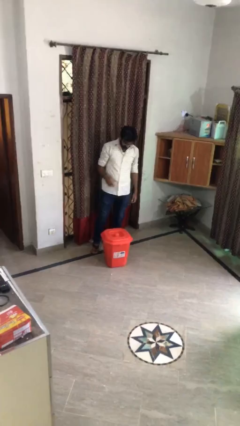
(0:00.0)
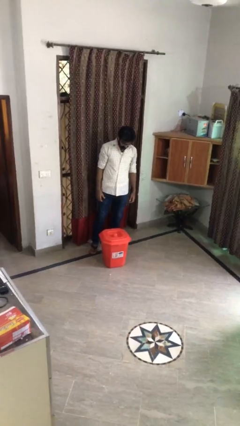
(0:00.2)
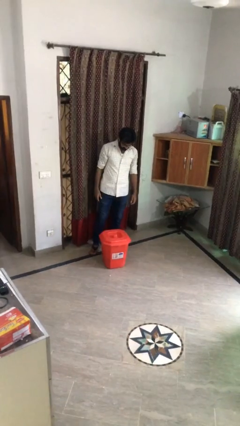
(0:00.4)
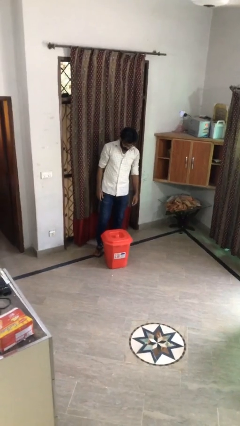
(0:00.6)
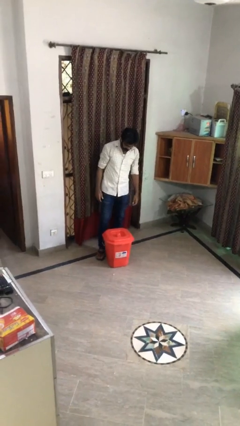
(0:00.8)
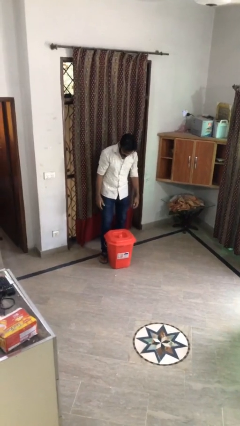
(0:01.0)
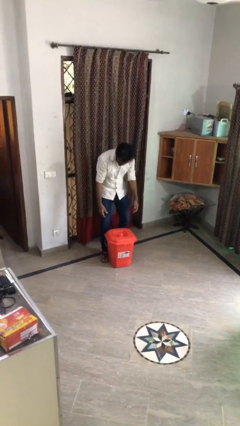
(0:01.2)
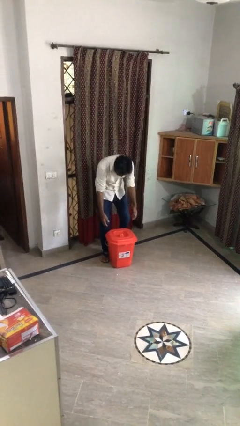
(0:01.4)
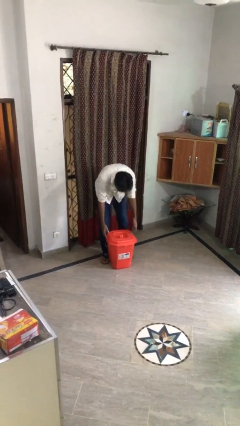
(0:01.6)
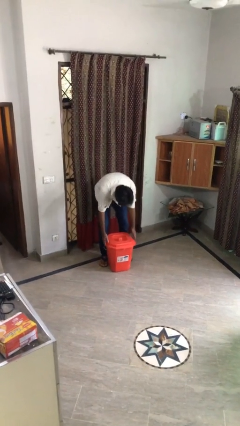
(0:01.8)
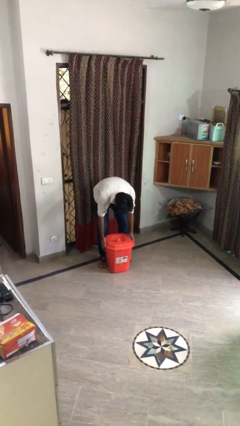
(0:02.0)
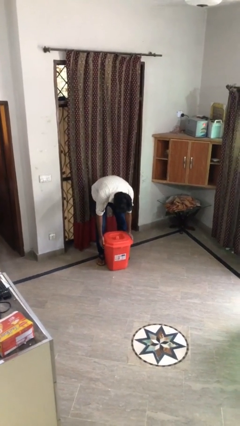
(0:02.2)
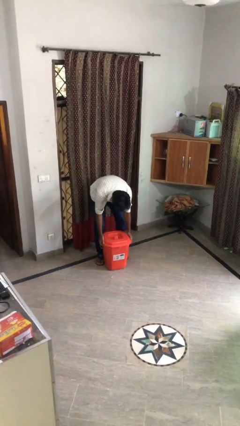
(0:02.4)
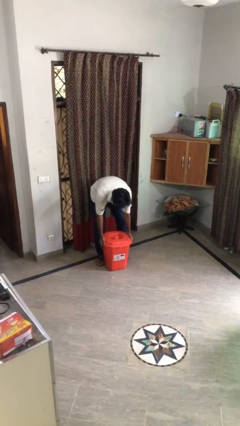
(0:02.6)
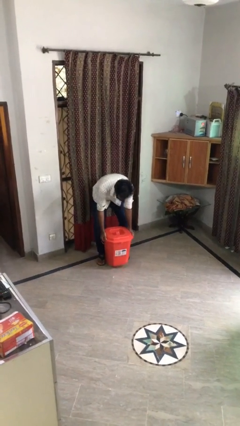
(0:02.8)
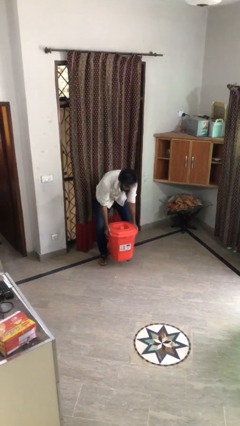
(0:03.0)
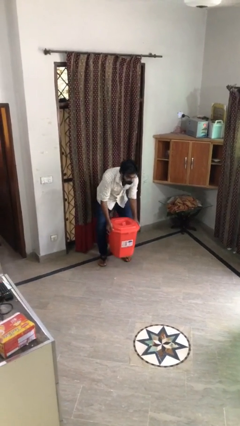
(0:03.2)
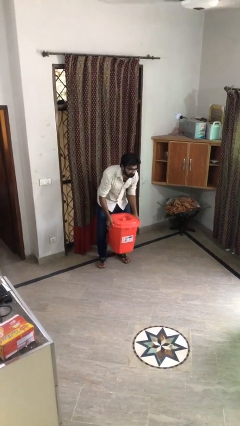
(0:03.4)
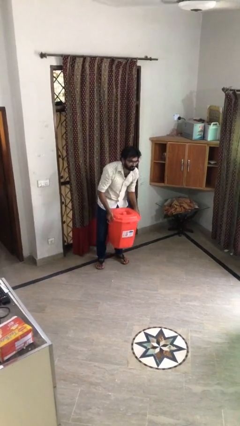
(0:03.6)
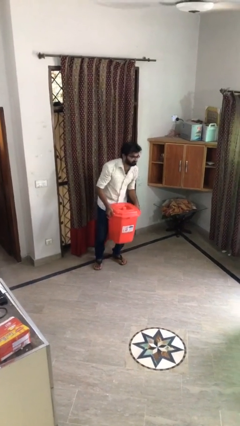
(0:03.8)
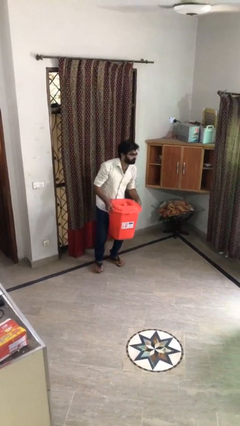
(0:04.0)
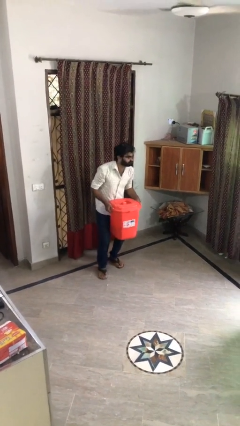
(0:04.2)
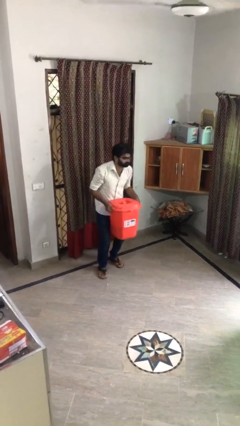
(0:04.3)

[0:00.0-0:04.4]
person picks up object from floor

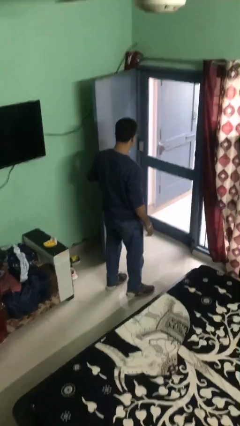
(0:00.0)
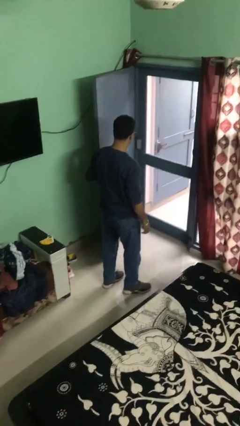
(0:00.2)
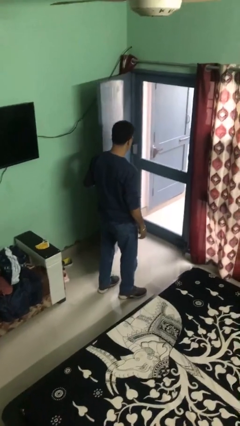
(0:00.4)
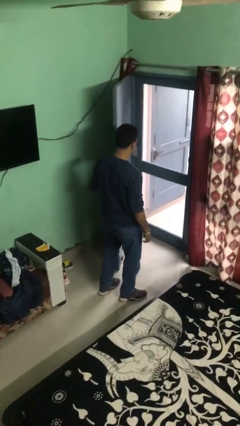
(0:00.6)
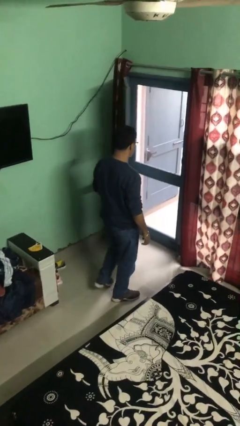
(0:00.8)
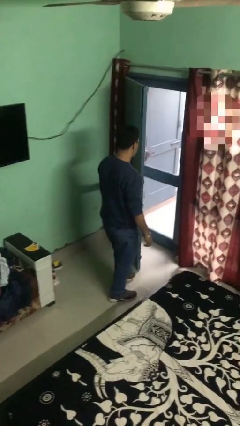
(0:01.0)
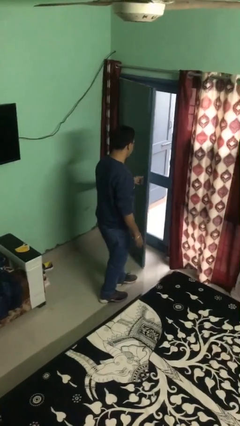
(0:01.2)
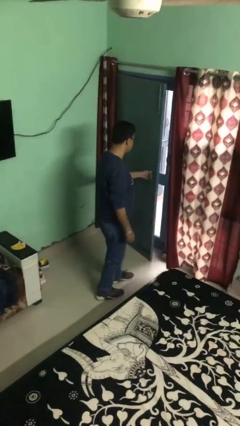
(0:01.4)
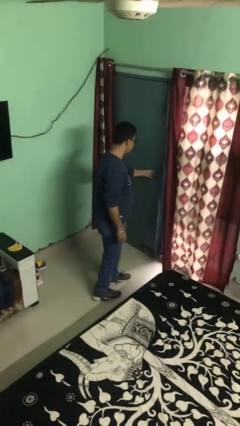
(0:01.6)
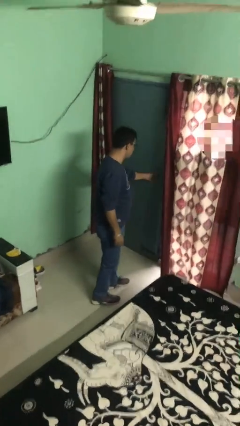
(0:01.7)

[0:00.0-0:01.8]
person closes facility door

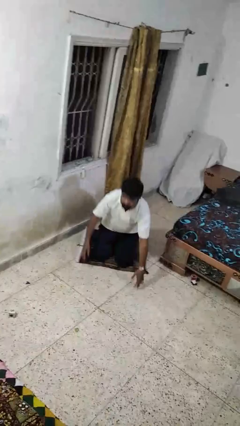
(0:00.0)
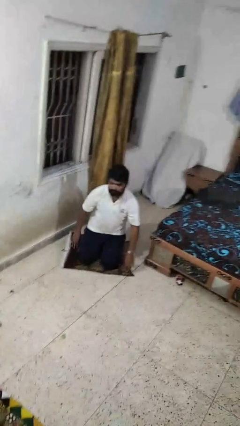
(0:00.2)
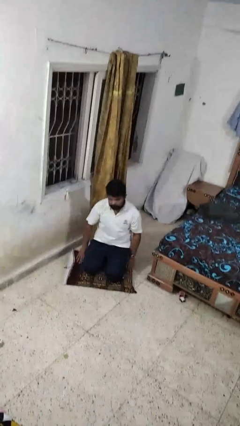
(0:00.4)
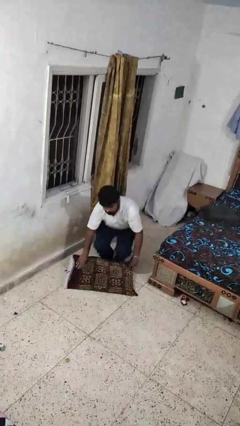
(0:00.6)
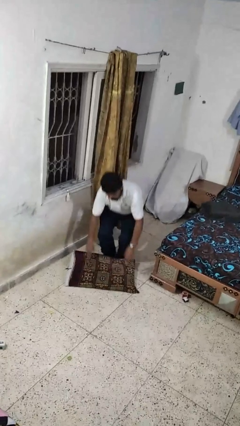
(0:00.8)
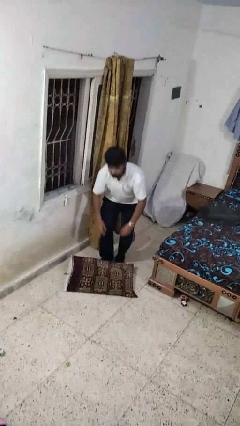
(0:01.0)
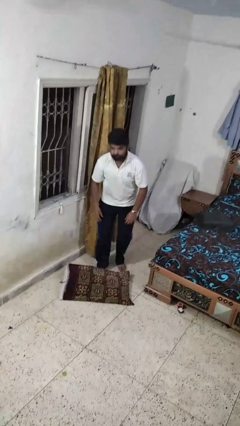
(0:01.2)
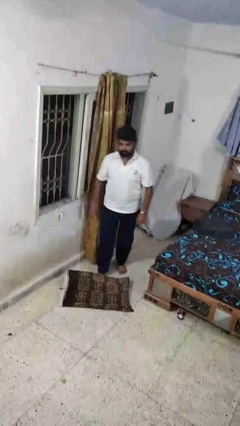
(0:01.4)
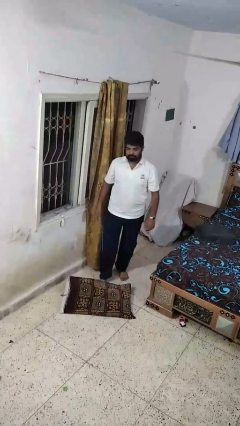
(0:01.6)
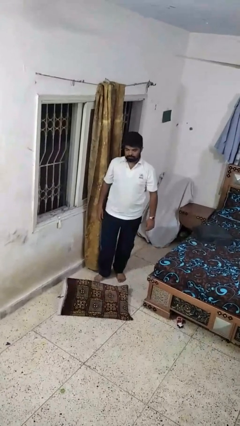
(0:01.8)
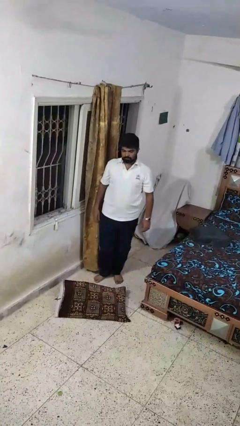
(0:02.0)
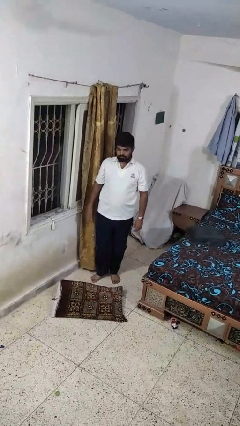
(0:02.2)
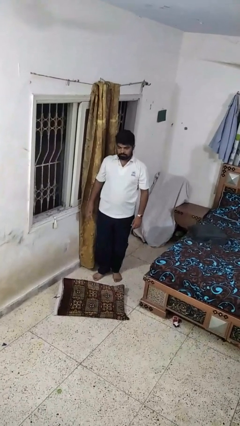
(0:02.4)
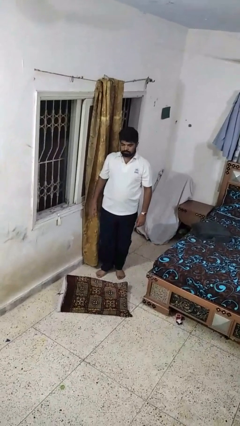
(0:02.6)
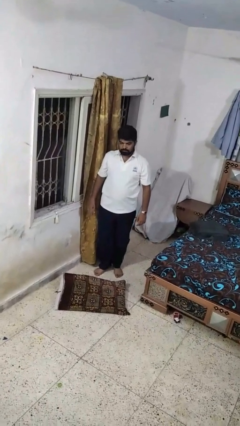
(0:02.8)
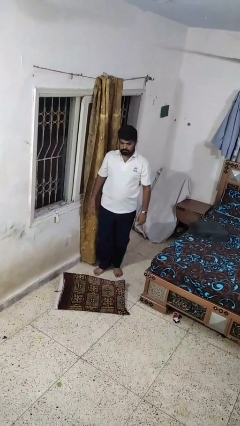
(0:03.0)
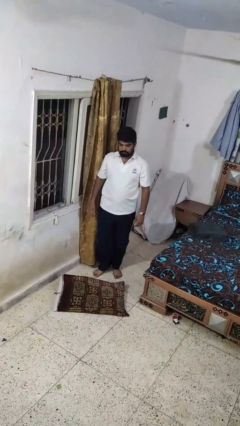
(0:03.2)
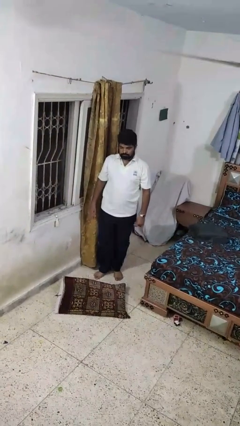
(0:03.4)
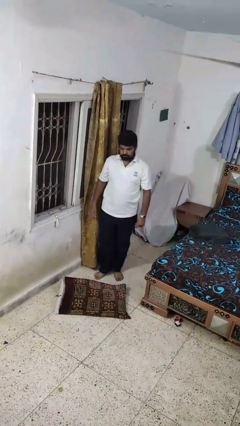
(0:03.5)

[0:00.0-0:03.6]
person stands up from floor

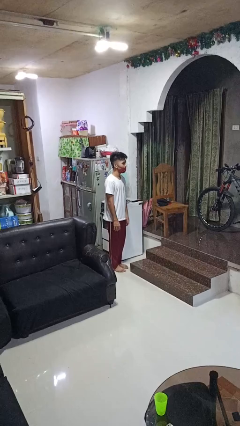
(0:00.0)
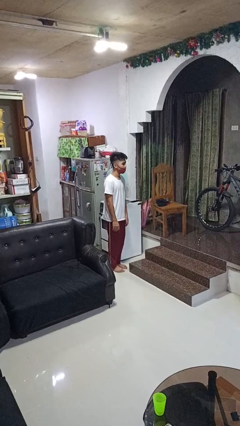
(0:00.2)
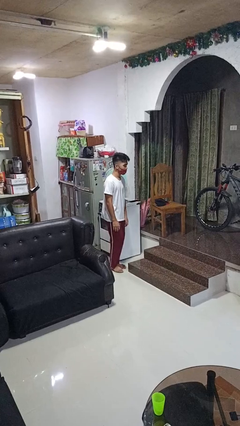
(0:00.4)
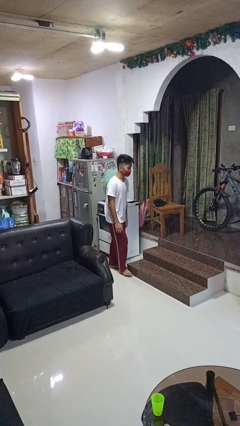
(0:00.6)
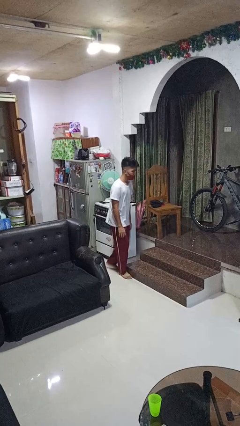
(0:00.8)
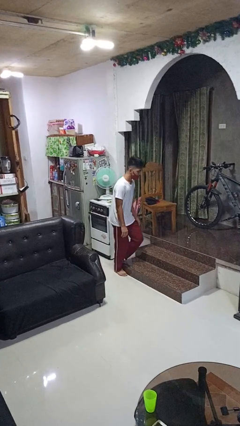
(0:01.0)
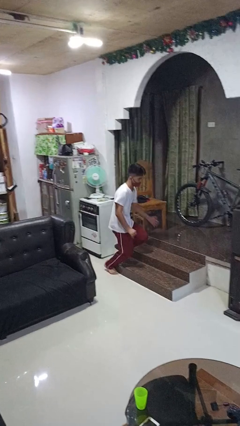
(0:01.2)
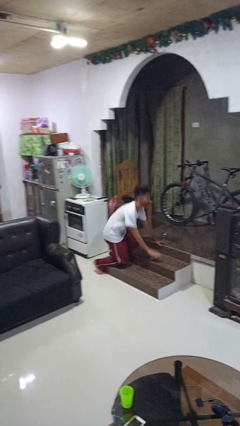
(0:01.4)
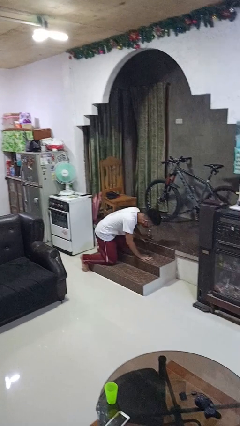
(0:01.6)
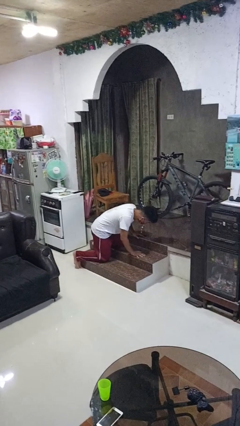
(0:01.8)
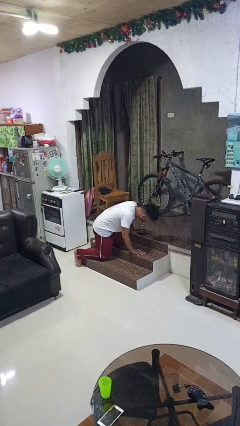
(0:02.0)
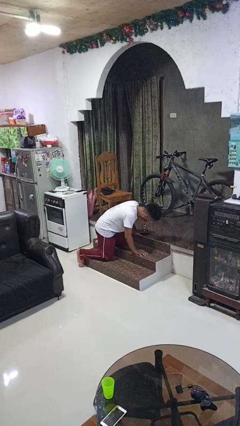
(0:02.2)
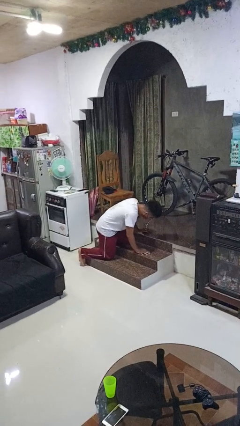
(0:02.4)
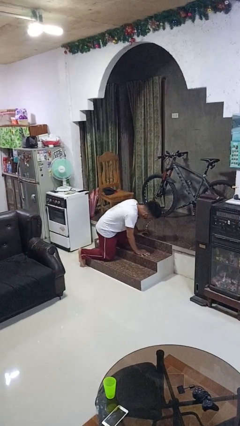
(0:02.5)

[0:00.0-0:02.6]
person trips on object on floor

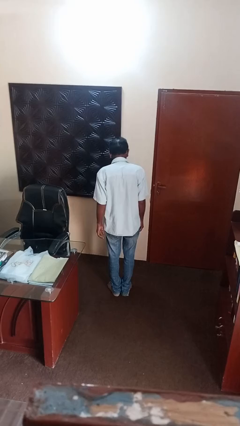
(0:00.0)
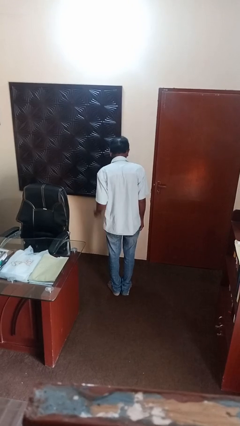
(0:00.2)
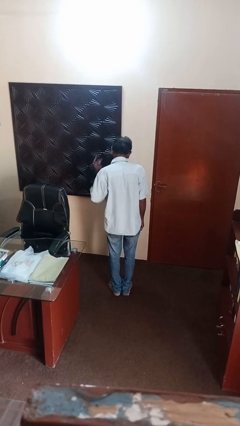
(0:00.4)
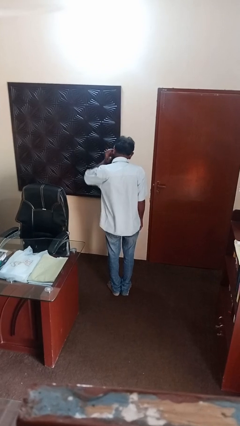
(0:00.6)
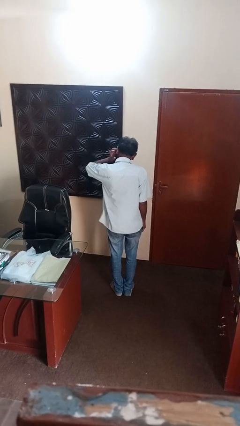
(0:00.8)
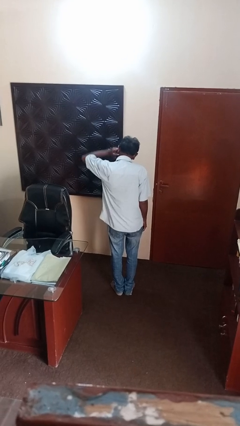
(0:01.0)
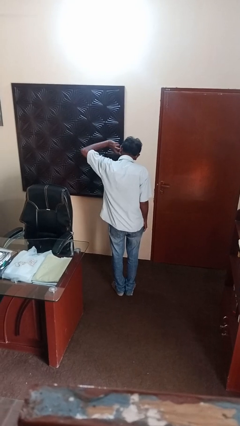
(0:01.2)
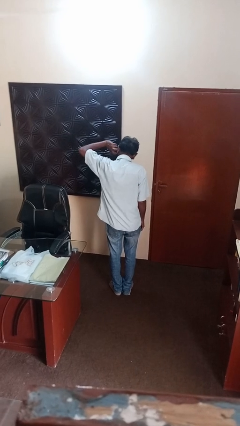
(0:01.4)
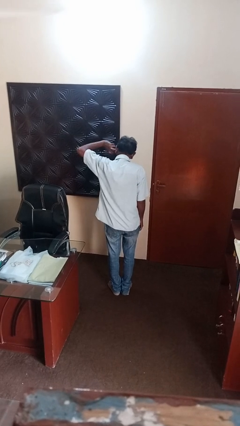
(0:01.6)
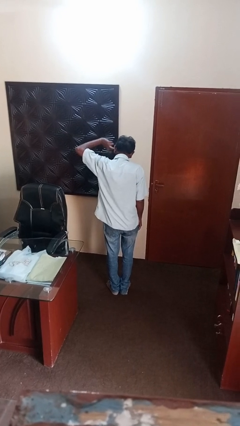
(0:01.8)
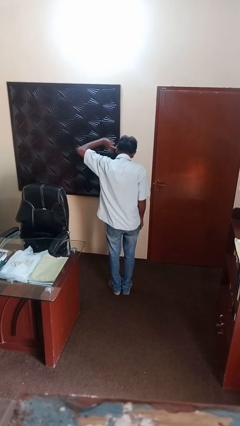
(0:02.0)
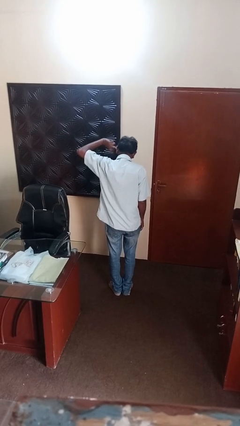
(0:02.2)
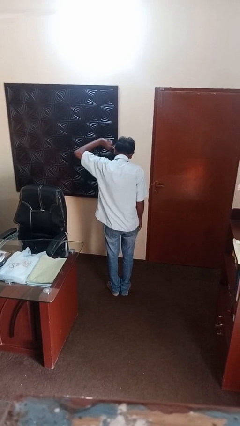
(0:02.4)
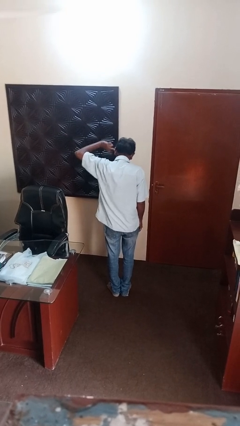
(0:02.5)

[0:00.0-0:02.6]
person puts fingers in ear

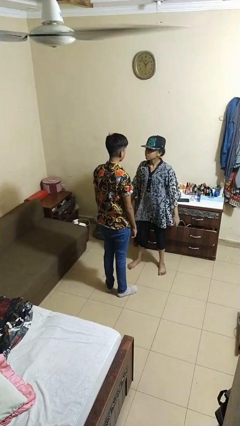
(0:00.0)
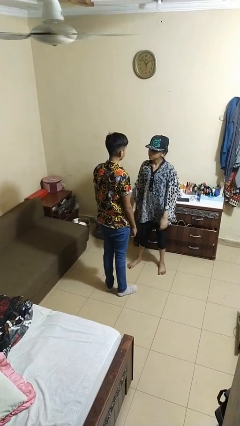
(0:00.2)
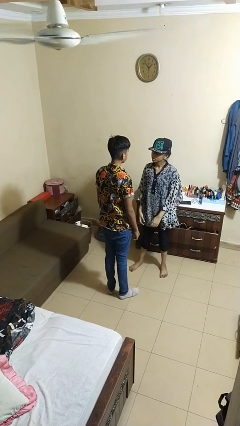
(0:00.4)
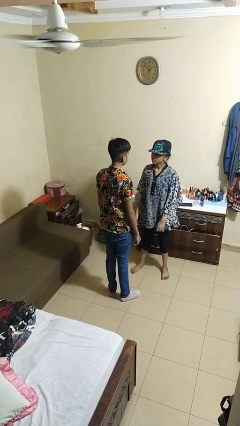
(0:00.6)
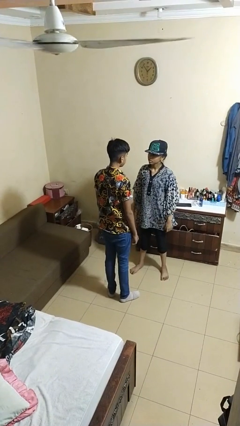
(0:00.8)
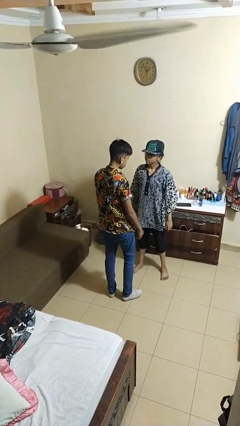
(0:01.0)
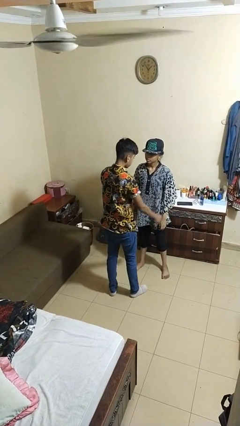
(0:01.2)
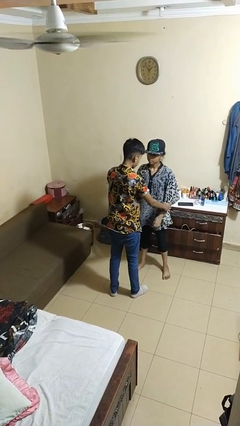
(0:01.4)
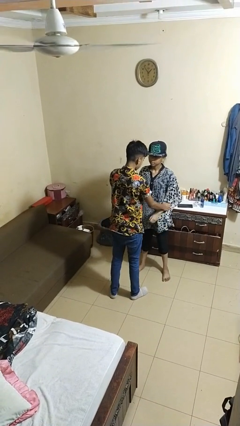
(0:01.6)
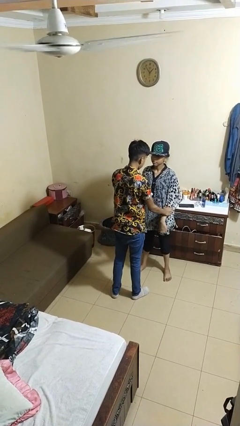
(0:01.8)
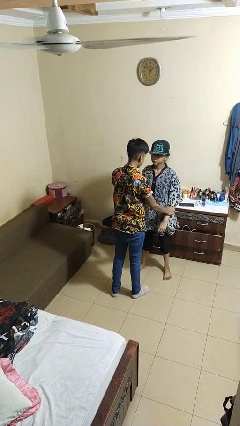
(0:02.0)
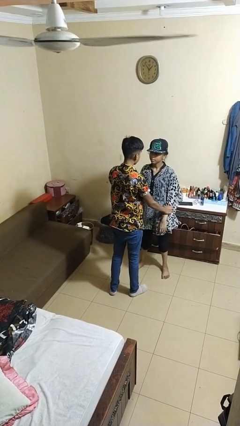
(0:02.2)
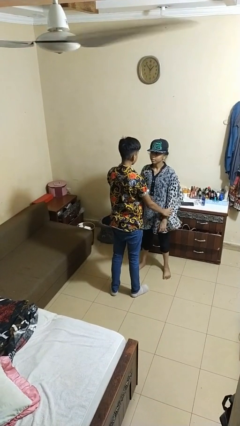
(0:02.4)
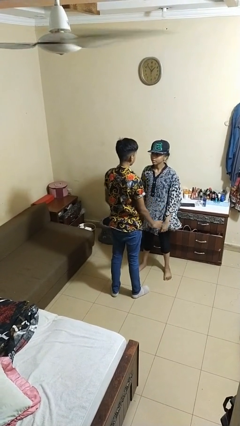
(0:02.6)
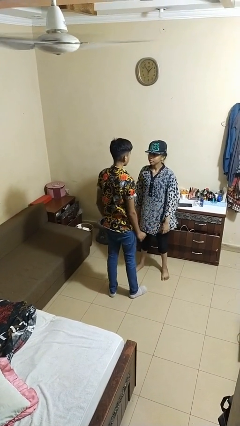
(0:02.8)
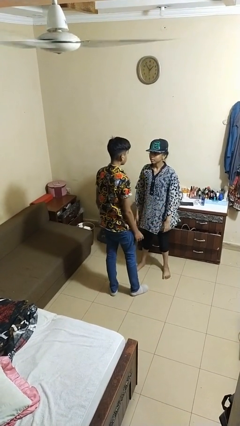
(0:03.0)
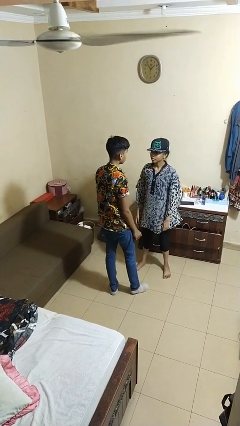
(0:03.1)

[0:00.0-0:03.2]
person grabs person by forearm
